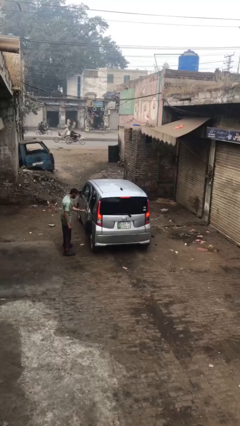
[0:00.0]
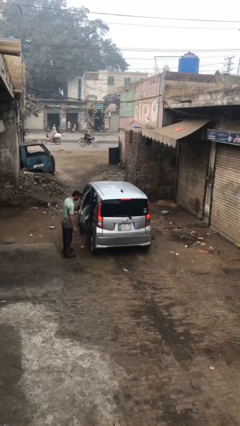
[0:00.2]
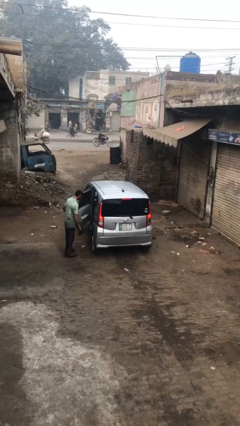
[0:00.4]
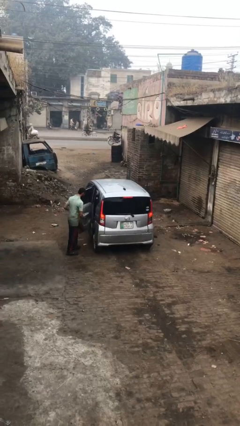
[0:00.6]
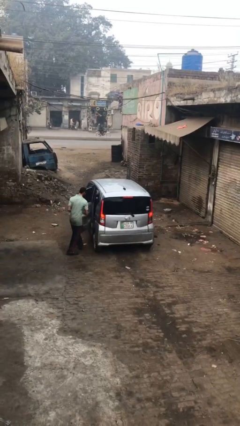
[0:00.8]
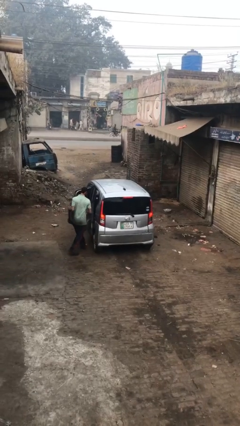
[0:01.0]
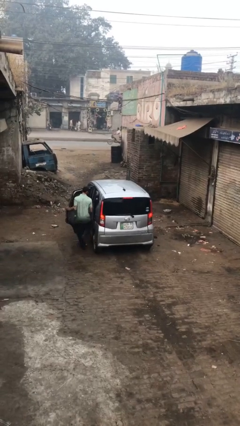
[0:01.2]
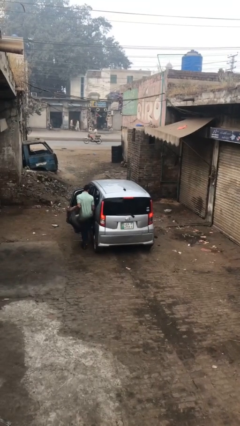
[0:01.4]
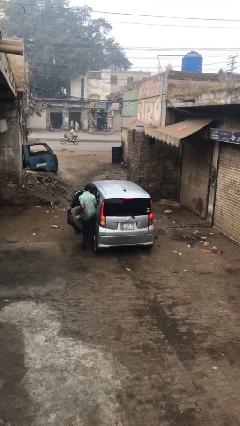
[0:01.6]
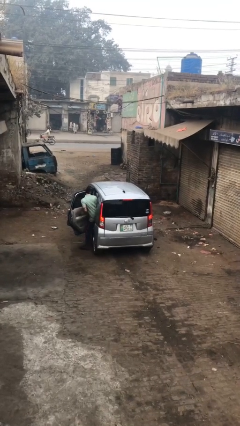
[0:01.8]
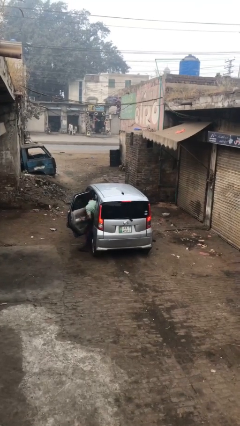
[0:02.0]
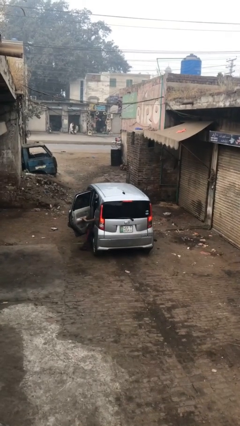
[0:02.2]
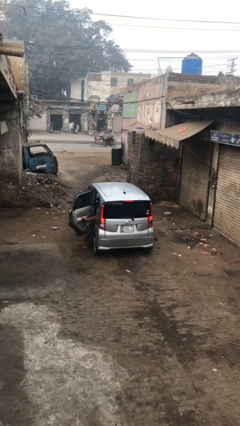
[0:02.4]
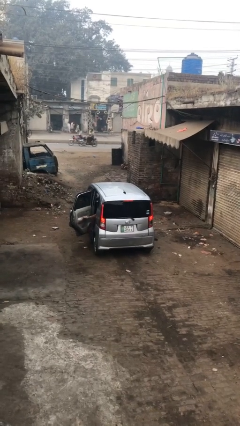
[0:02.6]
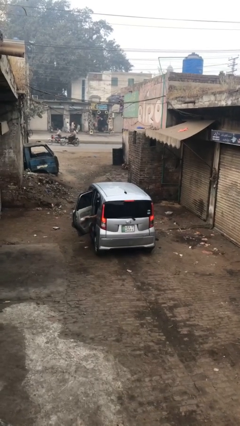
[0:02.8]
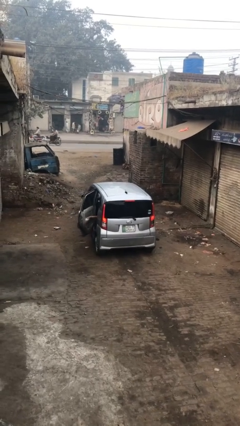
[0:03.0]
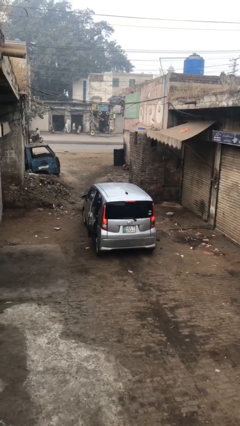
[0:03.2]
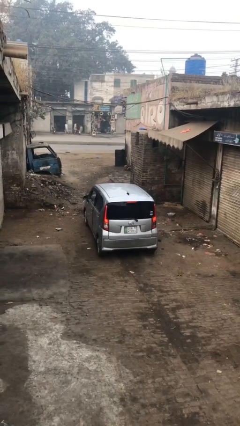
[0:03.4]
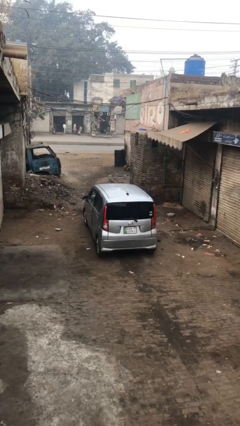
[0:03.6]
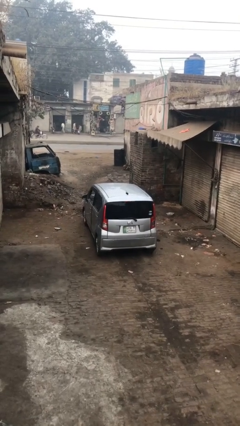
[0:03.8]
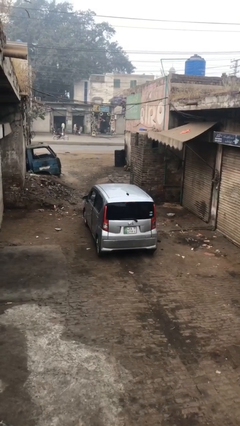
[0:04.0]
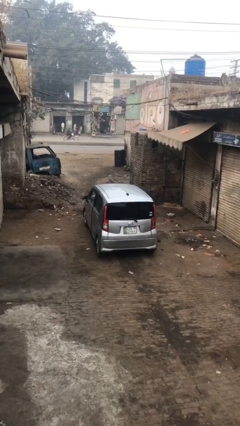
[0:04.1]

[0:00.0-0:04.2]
car picks up person

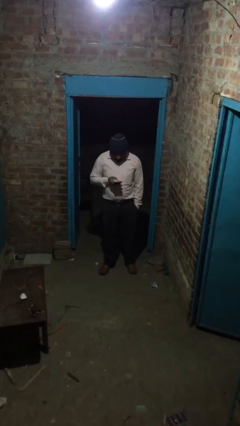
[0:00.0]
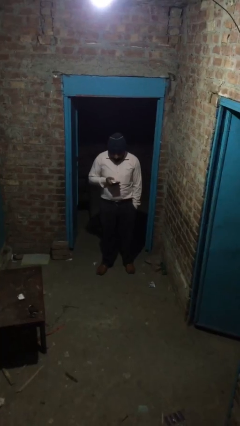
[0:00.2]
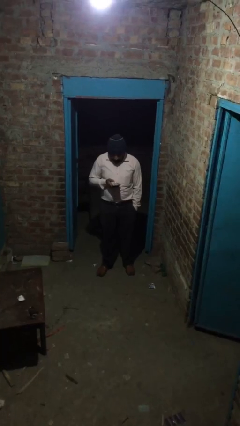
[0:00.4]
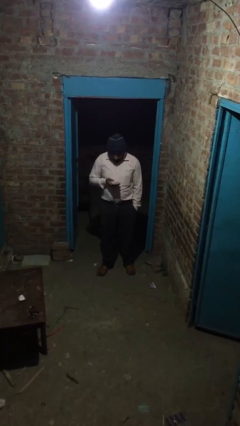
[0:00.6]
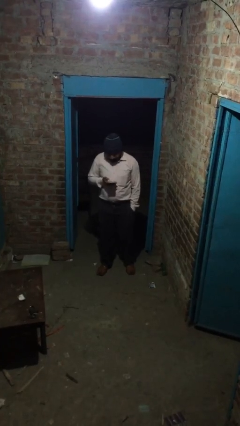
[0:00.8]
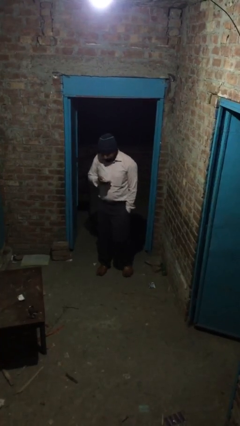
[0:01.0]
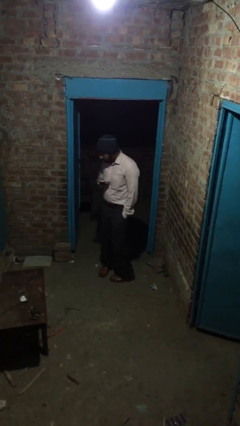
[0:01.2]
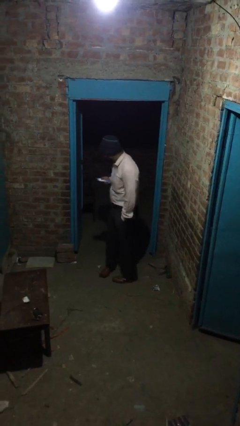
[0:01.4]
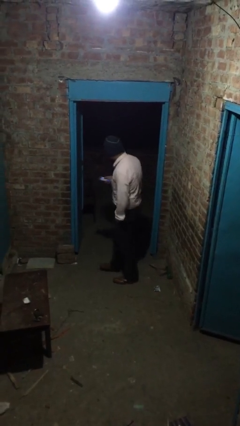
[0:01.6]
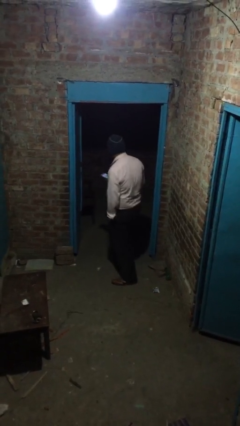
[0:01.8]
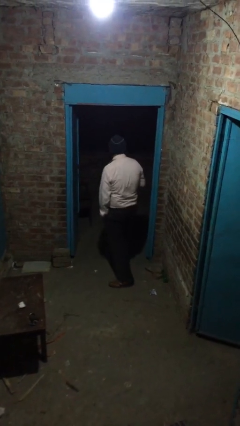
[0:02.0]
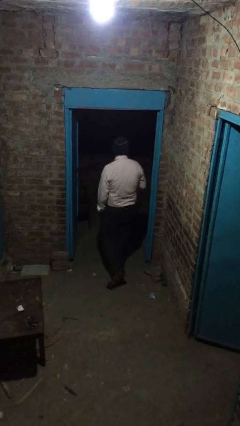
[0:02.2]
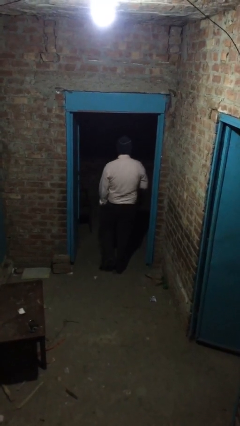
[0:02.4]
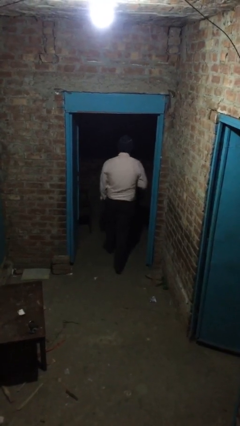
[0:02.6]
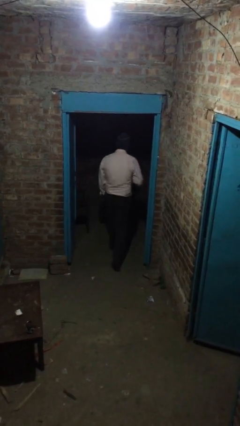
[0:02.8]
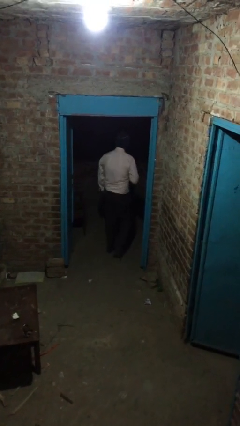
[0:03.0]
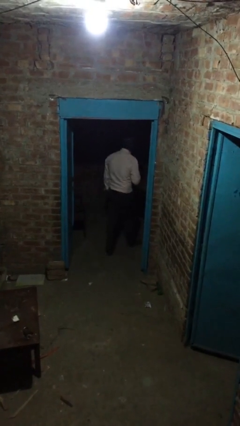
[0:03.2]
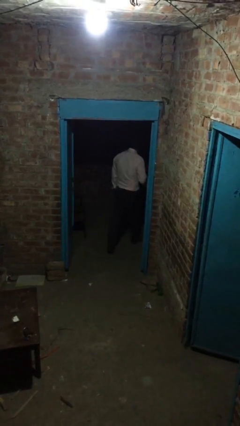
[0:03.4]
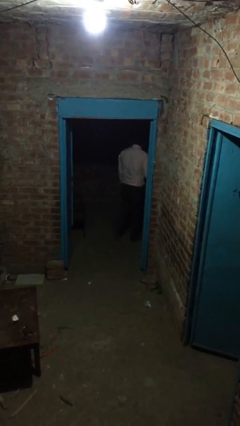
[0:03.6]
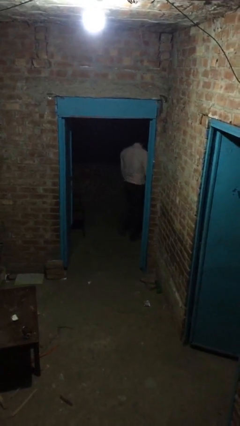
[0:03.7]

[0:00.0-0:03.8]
person exits scene through structure

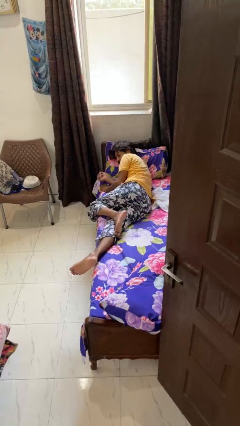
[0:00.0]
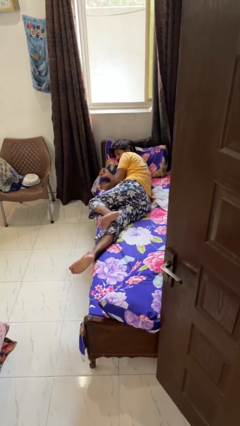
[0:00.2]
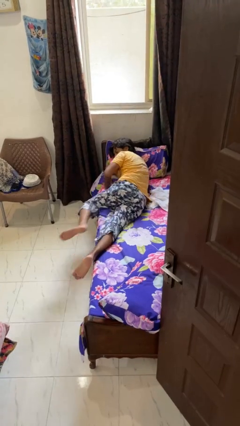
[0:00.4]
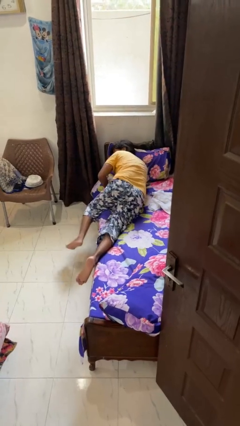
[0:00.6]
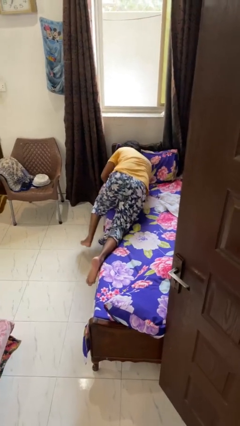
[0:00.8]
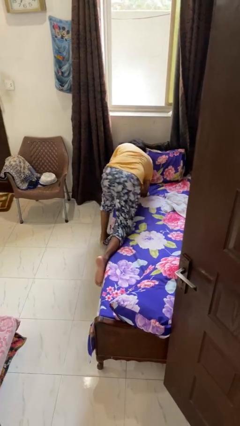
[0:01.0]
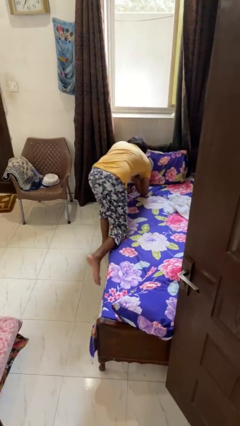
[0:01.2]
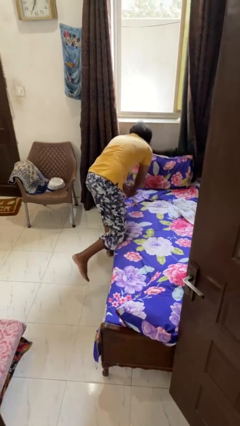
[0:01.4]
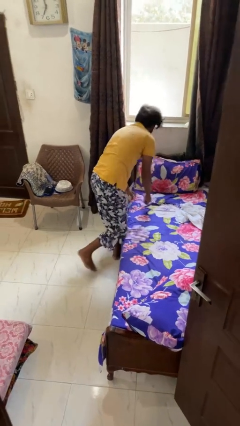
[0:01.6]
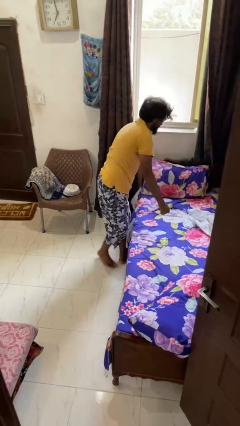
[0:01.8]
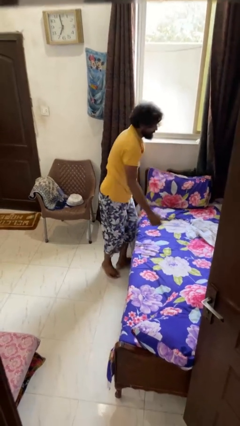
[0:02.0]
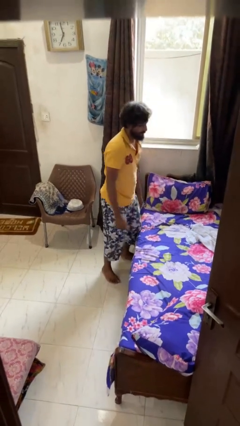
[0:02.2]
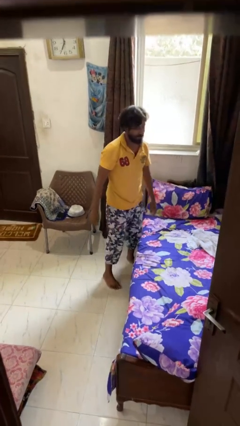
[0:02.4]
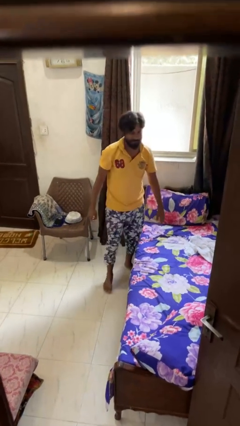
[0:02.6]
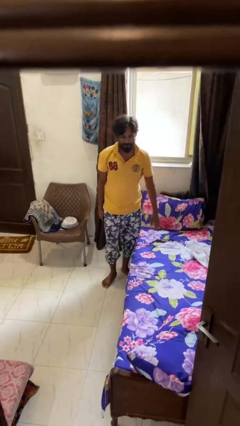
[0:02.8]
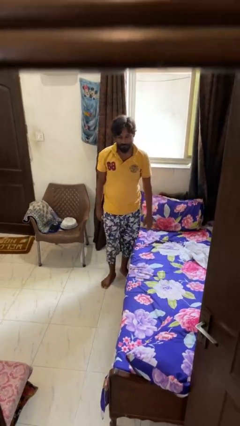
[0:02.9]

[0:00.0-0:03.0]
person stands up

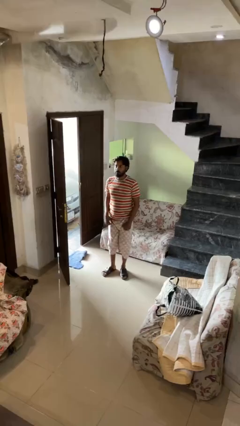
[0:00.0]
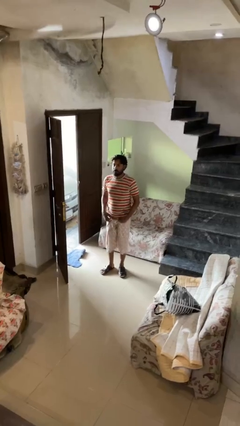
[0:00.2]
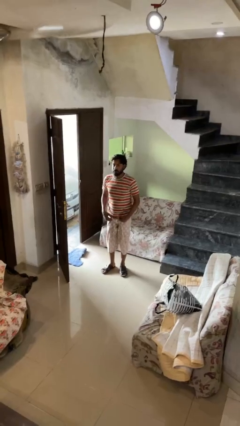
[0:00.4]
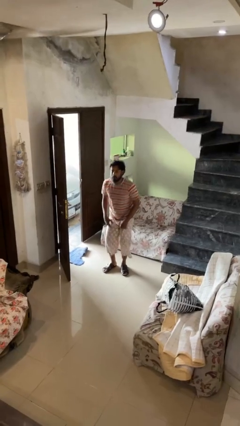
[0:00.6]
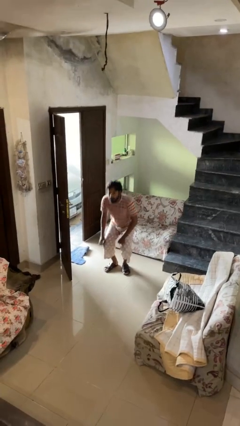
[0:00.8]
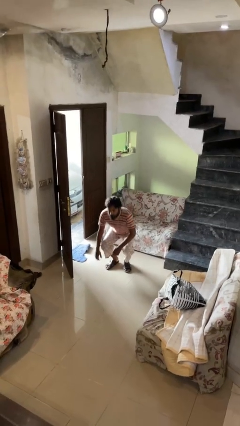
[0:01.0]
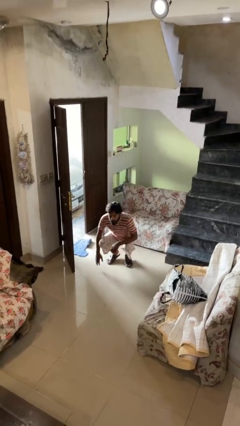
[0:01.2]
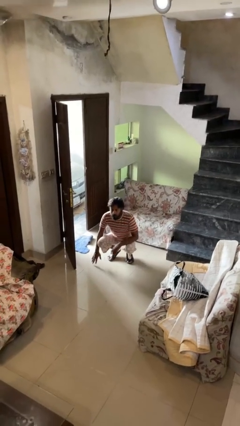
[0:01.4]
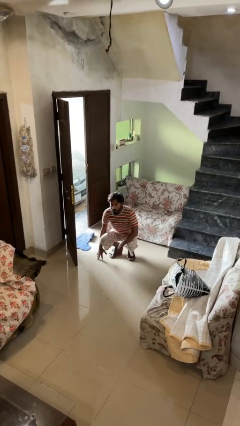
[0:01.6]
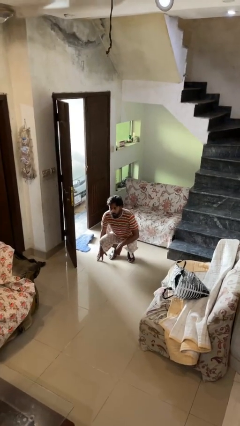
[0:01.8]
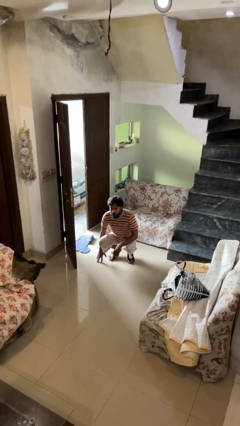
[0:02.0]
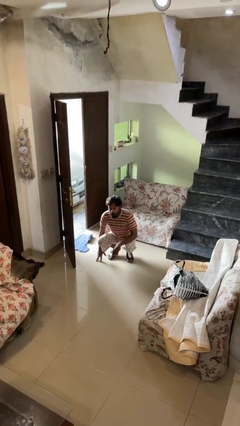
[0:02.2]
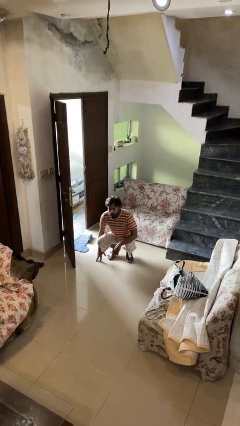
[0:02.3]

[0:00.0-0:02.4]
person squats

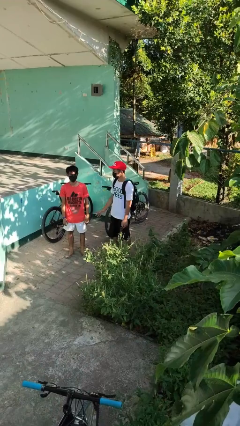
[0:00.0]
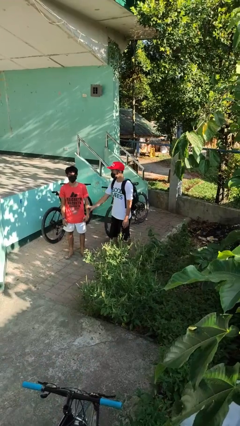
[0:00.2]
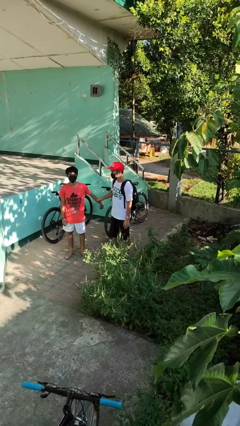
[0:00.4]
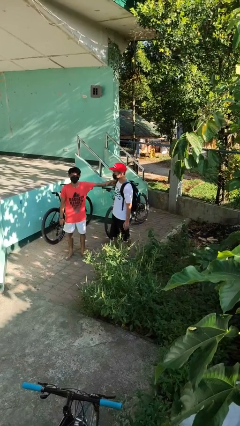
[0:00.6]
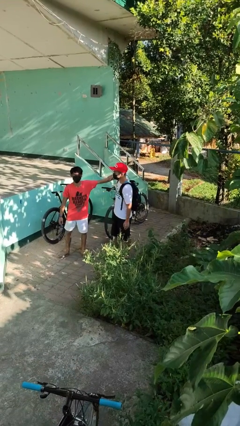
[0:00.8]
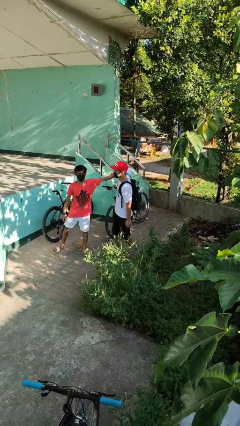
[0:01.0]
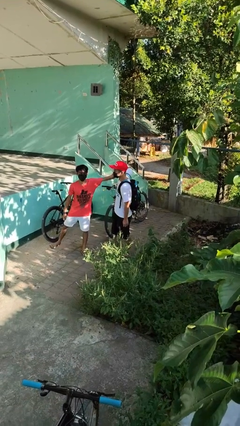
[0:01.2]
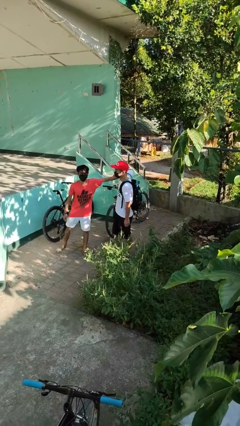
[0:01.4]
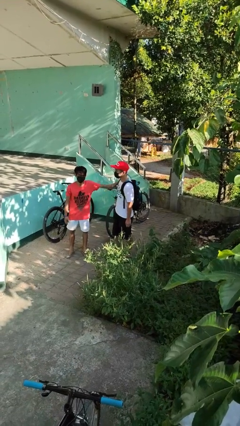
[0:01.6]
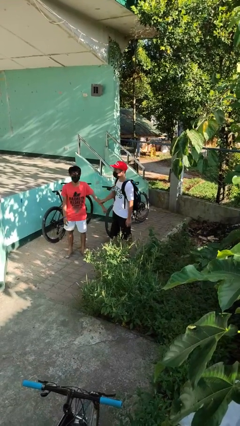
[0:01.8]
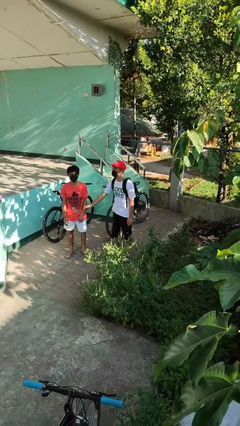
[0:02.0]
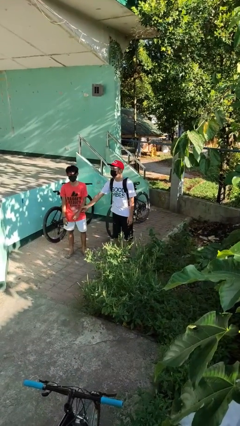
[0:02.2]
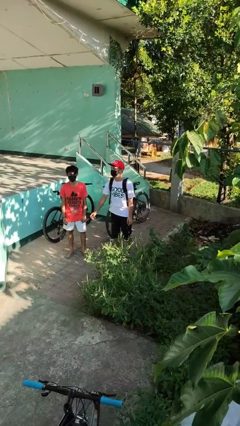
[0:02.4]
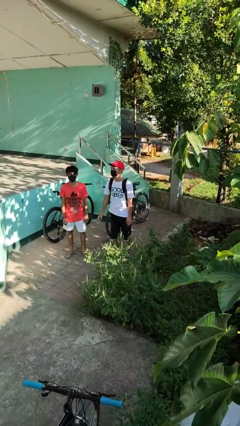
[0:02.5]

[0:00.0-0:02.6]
person grabs person by forearm

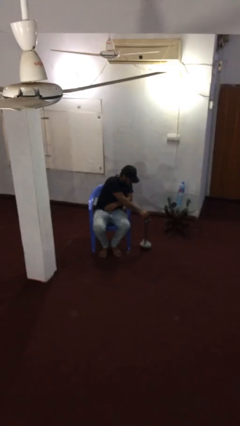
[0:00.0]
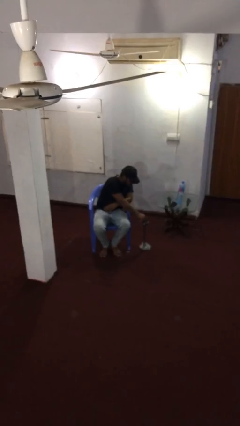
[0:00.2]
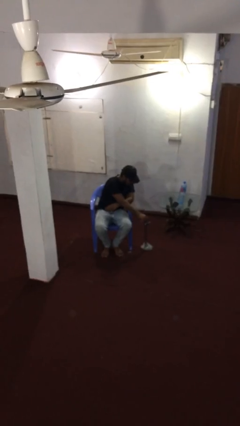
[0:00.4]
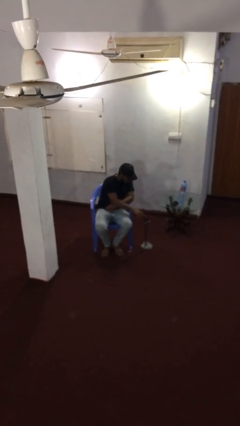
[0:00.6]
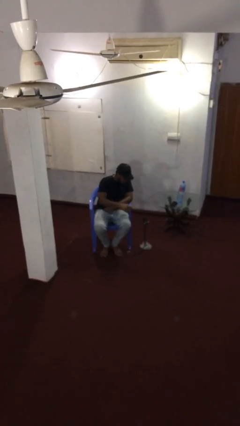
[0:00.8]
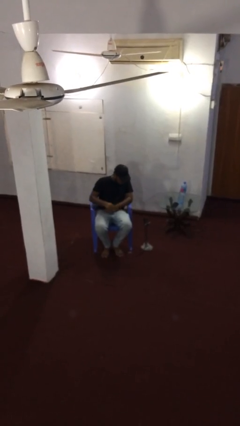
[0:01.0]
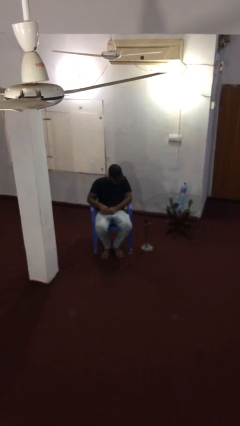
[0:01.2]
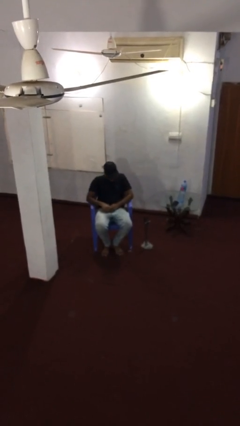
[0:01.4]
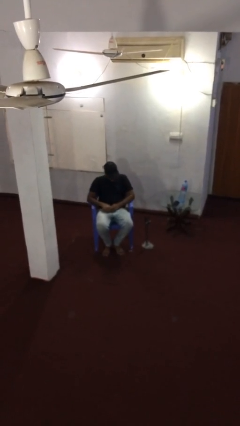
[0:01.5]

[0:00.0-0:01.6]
person puts down object on floor
